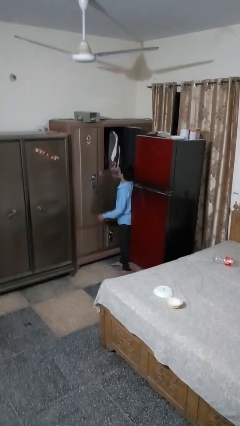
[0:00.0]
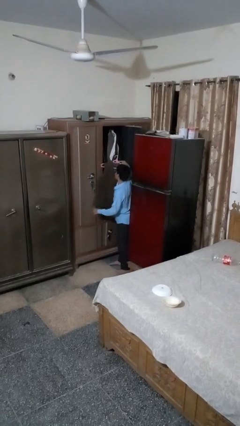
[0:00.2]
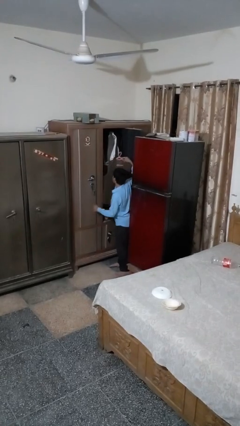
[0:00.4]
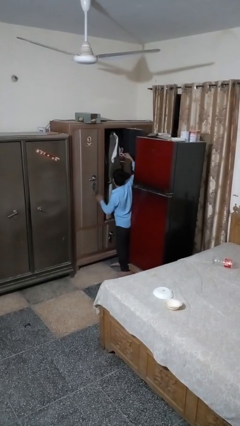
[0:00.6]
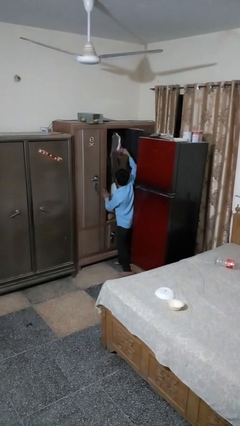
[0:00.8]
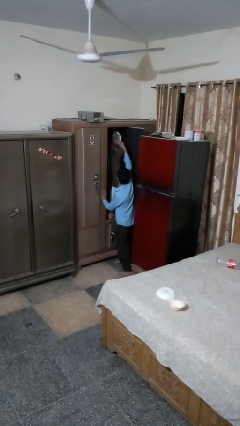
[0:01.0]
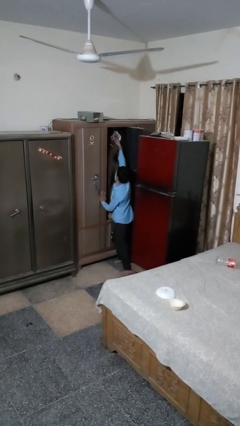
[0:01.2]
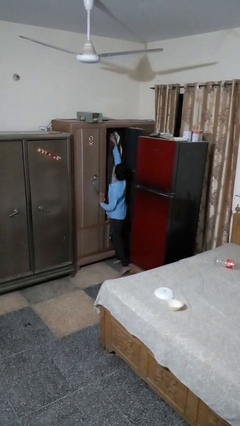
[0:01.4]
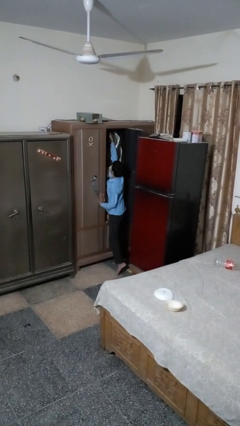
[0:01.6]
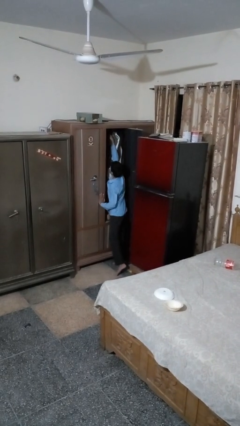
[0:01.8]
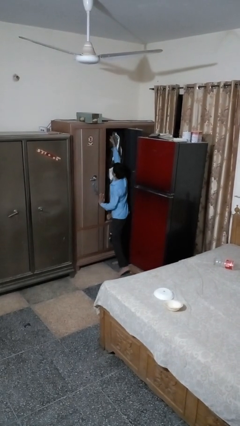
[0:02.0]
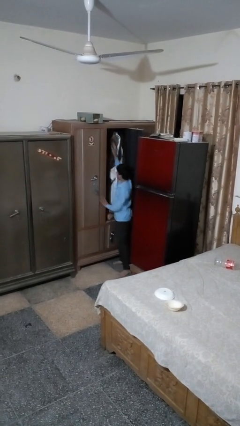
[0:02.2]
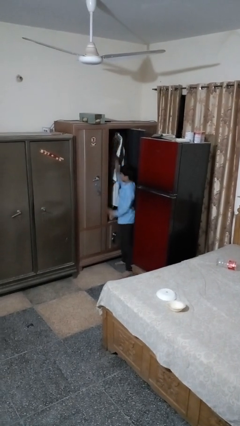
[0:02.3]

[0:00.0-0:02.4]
person puts clothes into closet

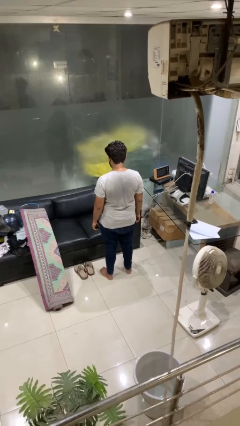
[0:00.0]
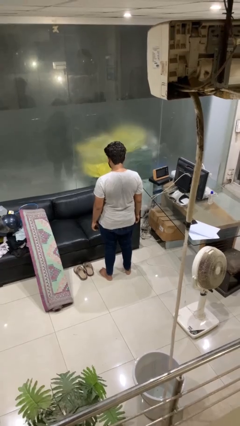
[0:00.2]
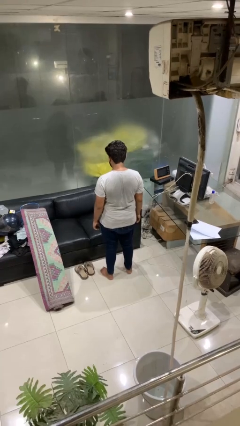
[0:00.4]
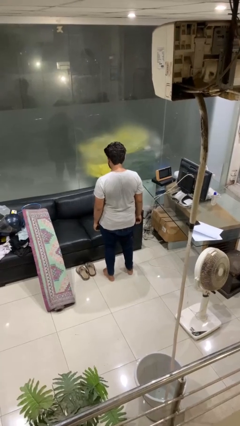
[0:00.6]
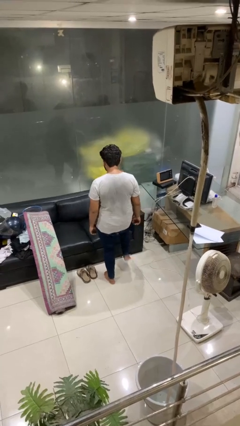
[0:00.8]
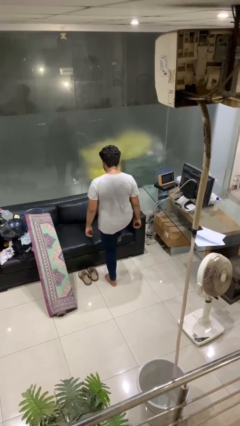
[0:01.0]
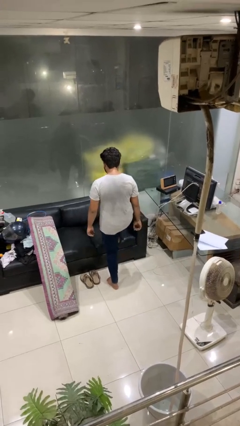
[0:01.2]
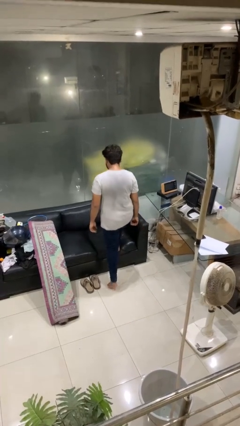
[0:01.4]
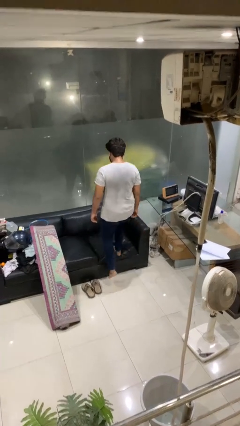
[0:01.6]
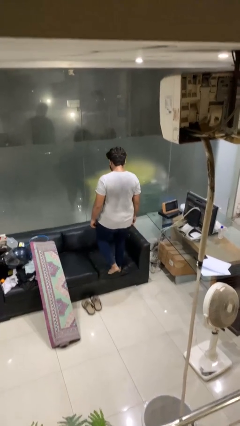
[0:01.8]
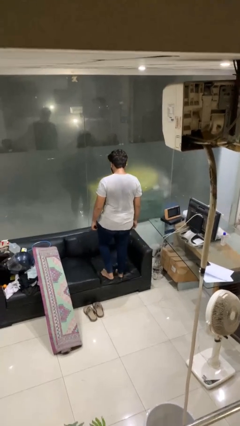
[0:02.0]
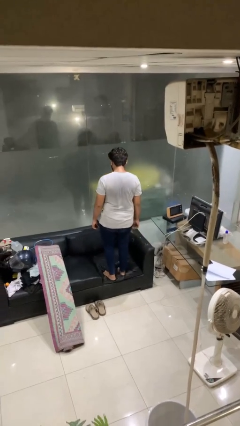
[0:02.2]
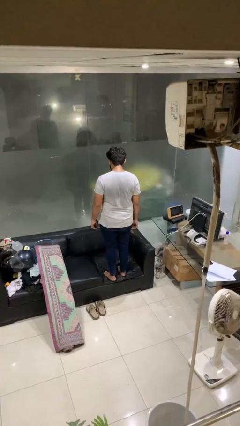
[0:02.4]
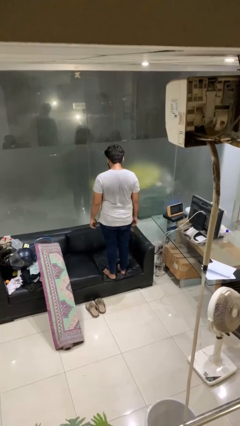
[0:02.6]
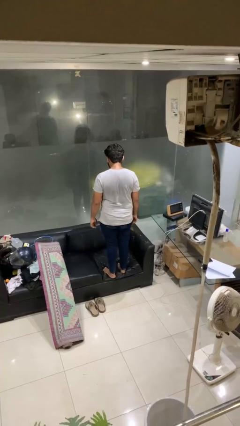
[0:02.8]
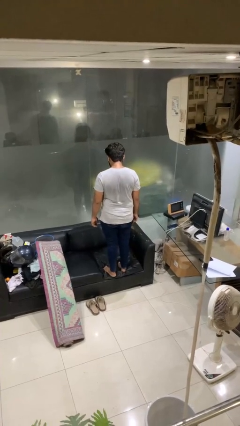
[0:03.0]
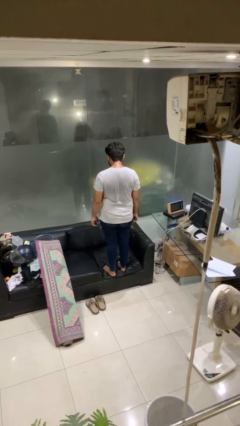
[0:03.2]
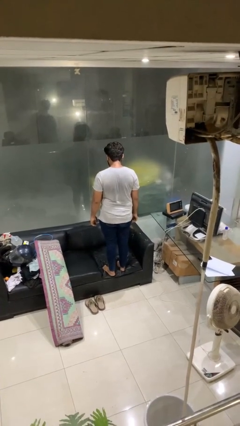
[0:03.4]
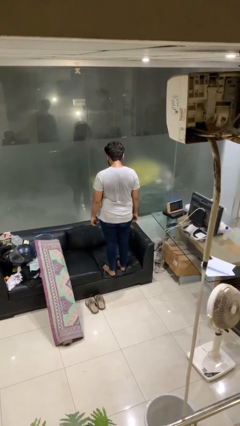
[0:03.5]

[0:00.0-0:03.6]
person climbs on couch

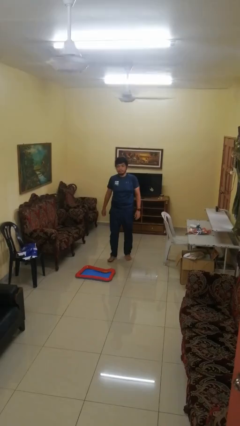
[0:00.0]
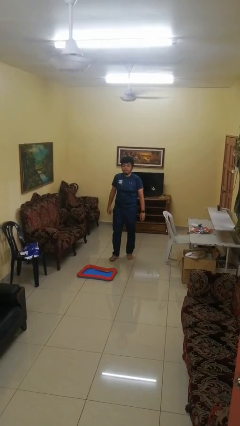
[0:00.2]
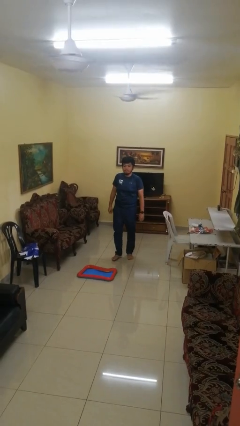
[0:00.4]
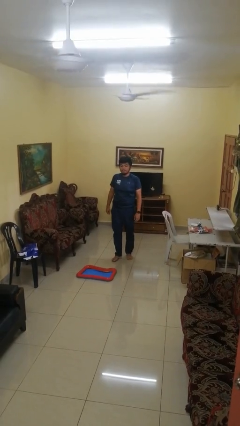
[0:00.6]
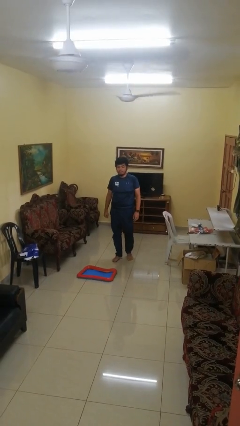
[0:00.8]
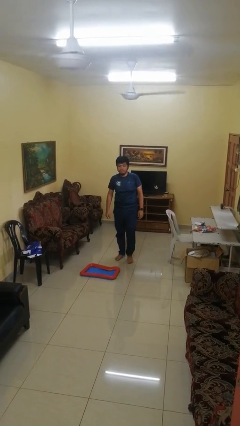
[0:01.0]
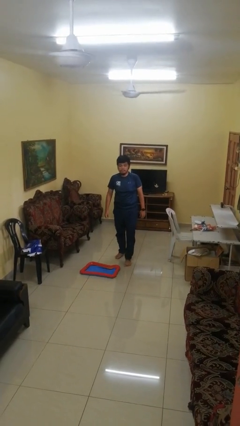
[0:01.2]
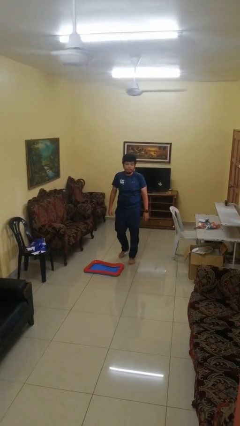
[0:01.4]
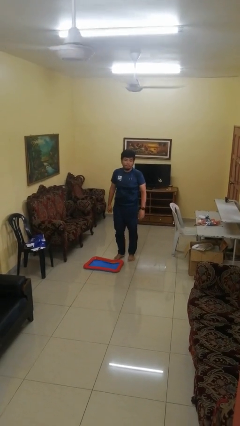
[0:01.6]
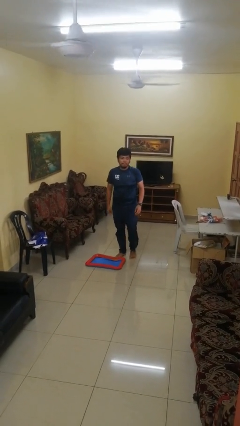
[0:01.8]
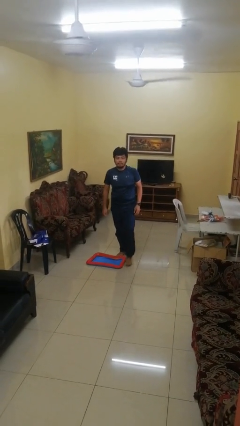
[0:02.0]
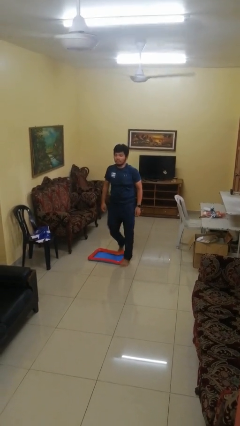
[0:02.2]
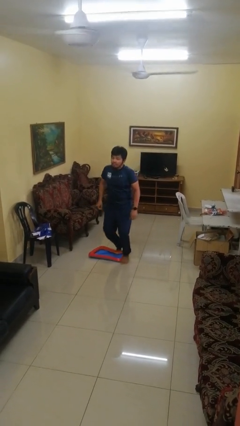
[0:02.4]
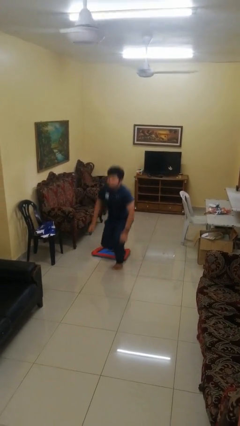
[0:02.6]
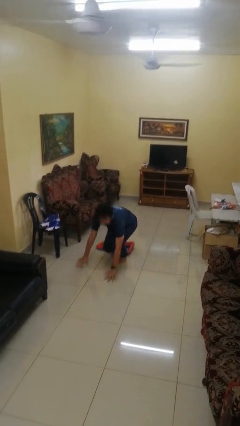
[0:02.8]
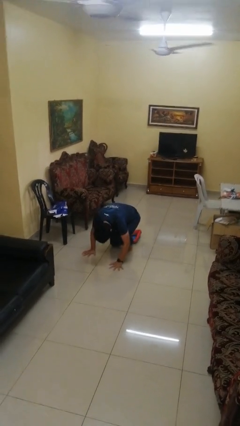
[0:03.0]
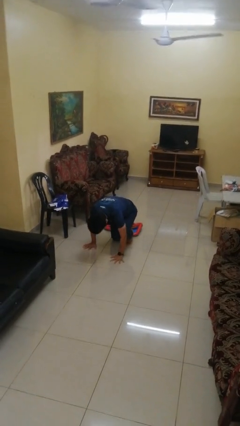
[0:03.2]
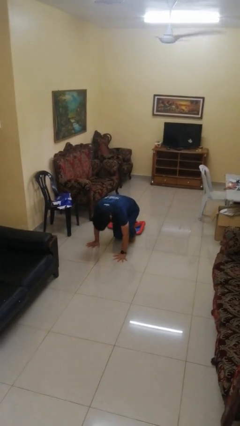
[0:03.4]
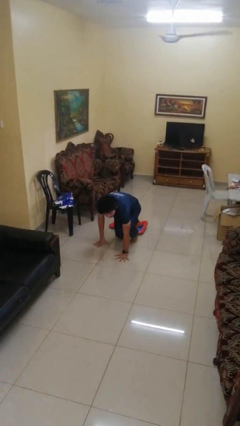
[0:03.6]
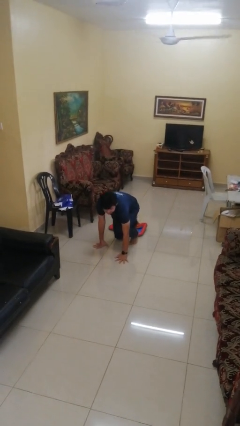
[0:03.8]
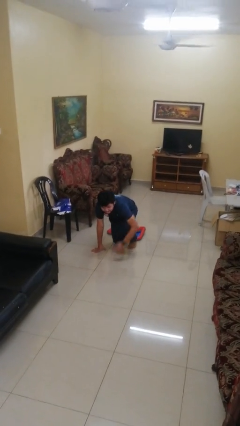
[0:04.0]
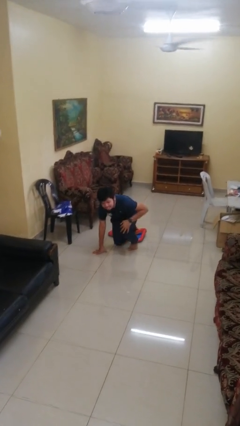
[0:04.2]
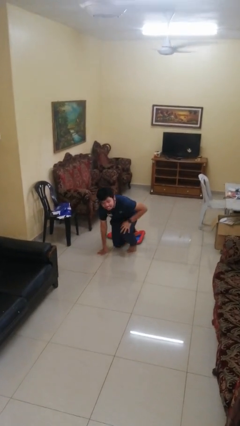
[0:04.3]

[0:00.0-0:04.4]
person trips on object on floor

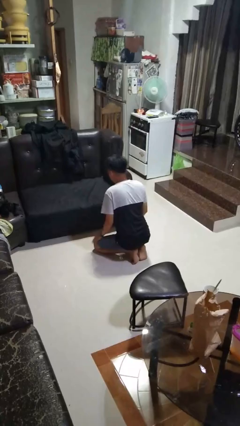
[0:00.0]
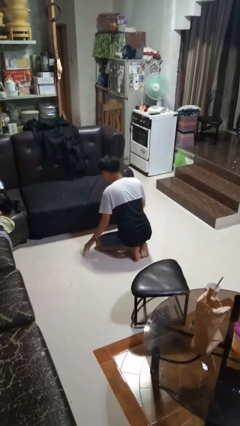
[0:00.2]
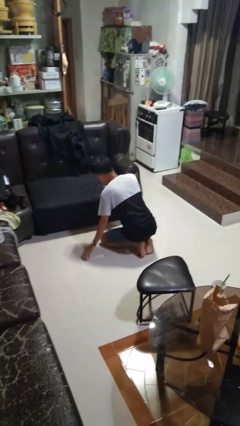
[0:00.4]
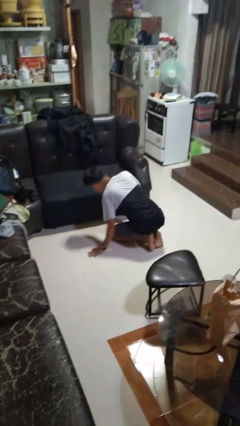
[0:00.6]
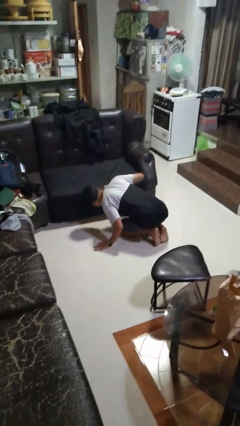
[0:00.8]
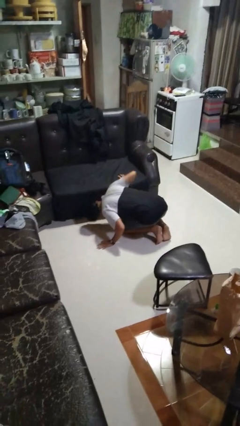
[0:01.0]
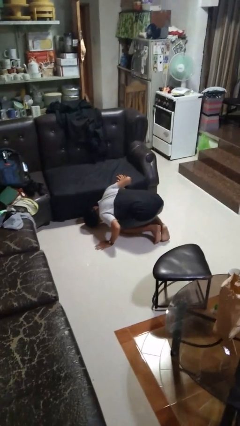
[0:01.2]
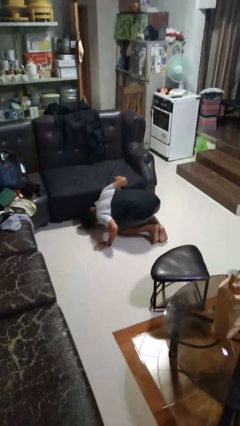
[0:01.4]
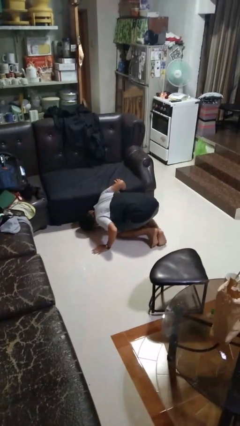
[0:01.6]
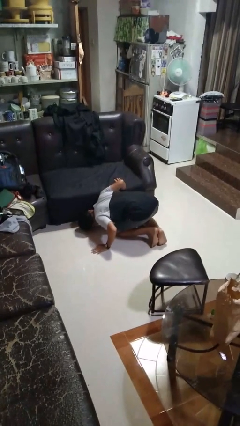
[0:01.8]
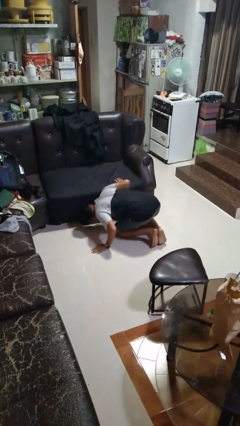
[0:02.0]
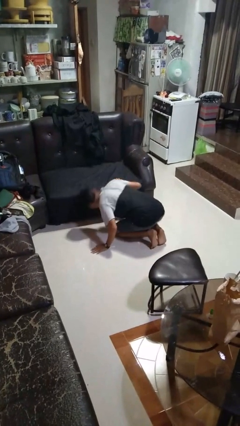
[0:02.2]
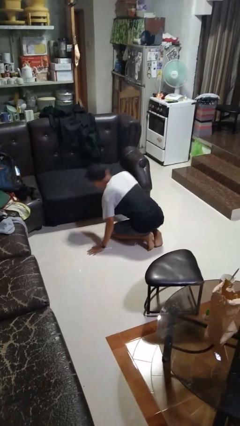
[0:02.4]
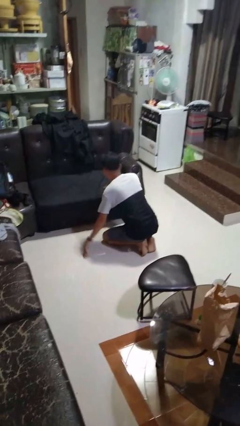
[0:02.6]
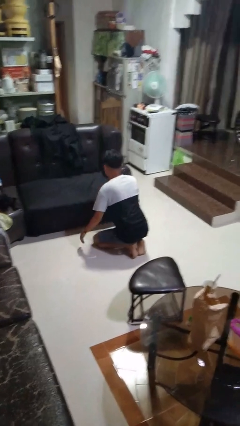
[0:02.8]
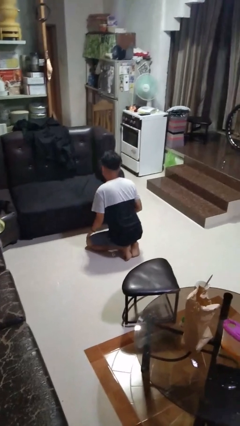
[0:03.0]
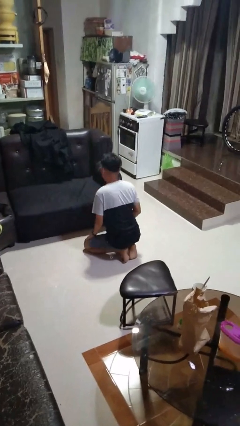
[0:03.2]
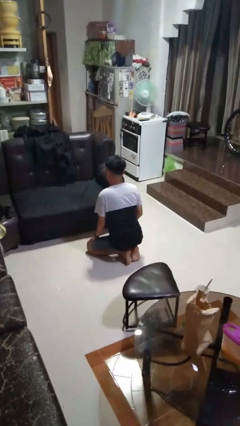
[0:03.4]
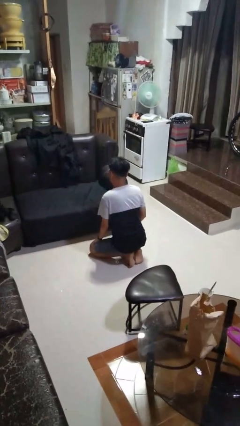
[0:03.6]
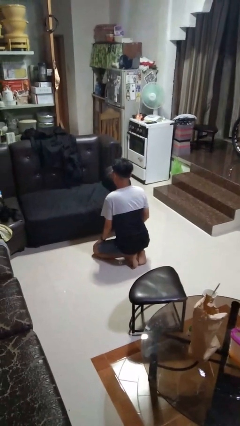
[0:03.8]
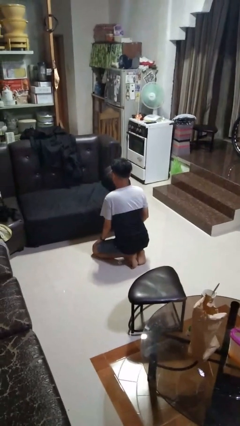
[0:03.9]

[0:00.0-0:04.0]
person searches under couch

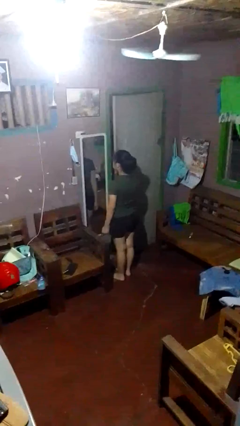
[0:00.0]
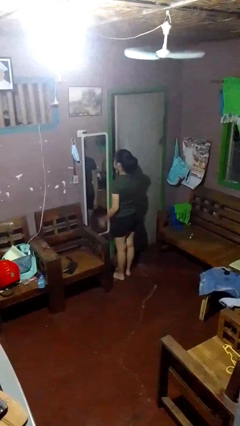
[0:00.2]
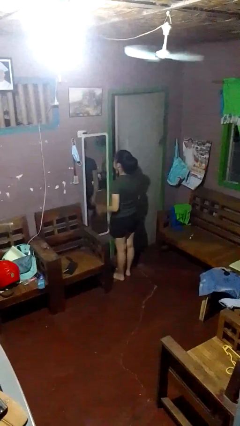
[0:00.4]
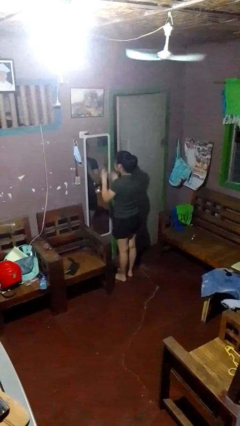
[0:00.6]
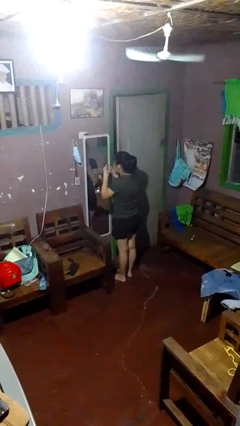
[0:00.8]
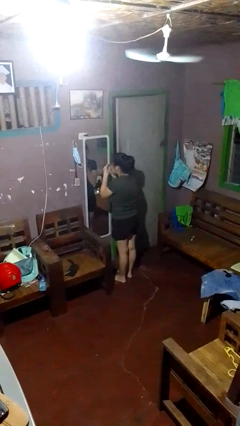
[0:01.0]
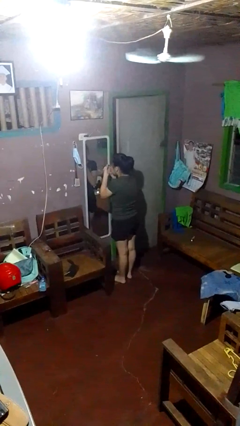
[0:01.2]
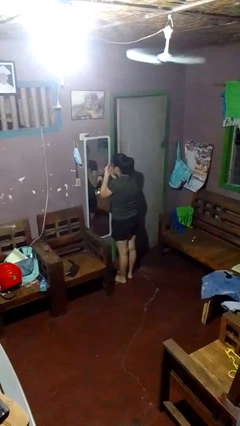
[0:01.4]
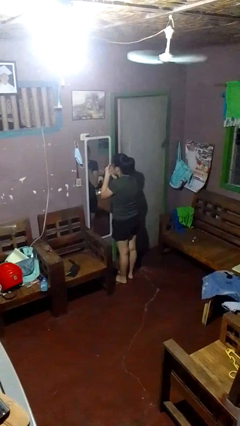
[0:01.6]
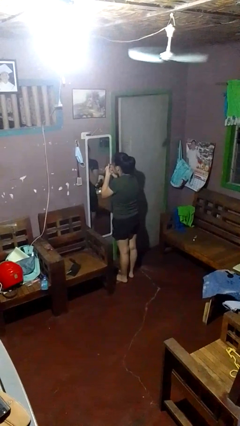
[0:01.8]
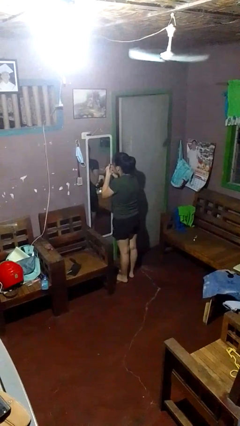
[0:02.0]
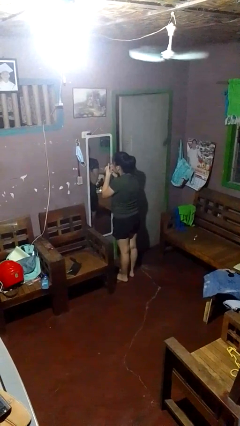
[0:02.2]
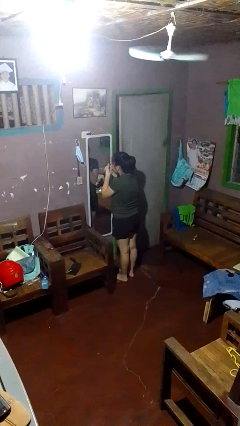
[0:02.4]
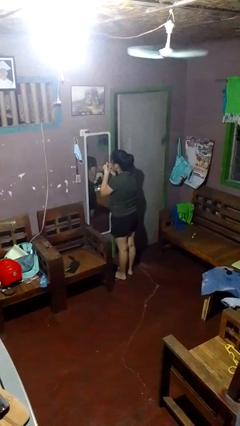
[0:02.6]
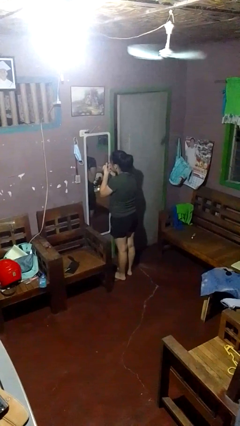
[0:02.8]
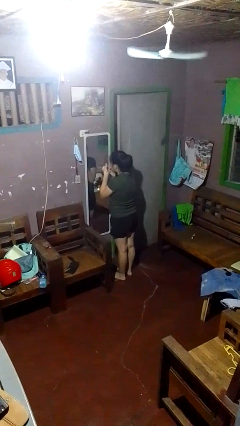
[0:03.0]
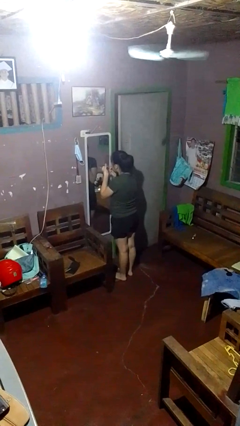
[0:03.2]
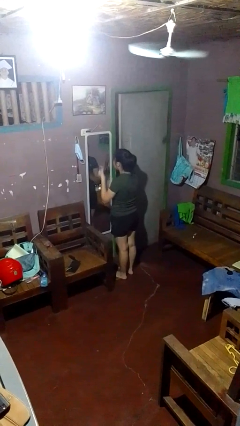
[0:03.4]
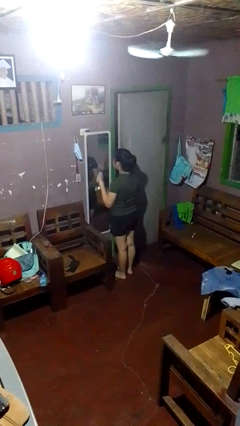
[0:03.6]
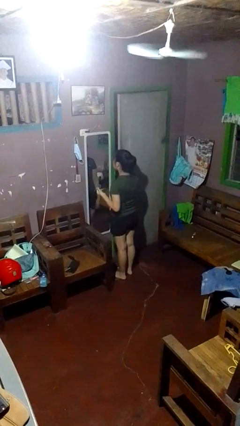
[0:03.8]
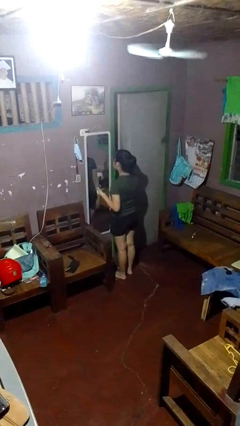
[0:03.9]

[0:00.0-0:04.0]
person applies eye makeup
